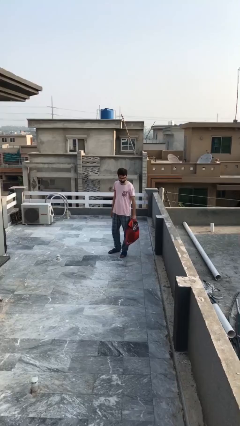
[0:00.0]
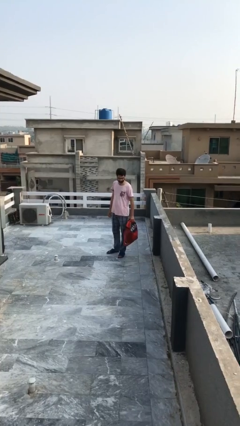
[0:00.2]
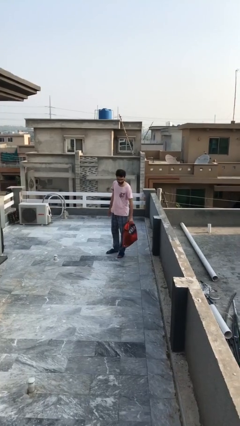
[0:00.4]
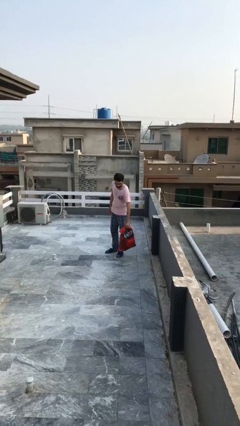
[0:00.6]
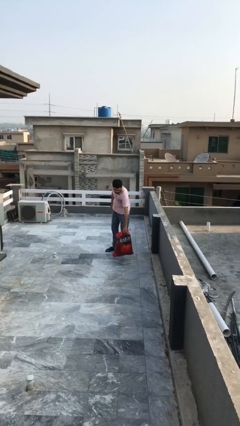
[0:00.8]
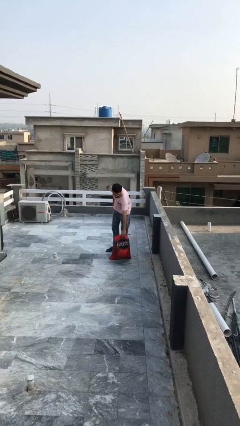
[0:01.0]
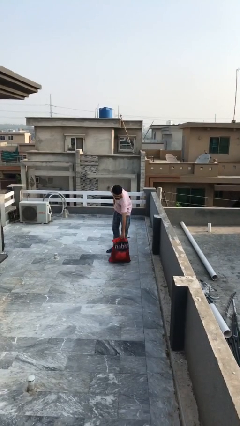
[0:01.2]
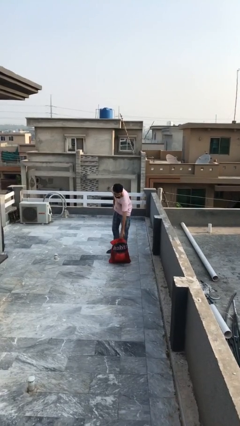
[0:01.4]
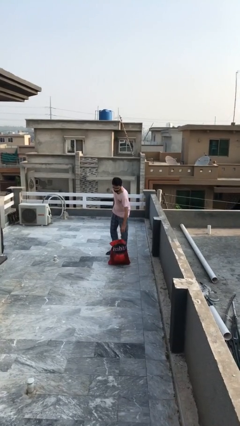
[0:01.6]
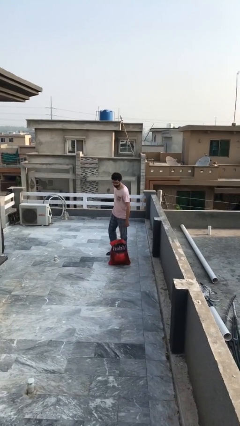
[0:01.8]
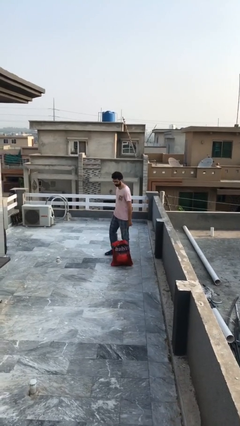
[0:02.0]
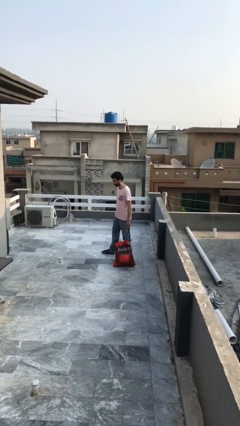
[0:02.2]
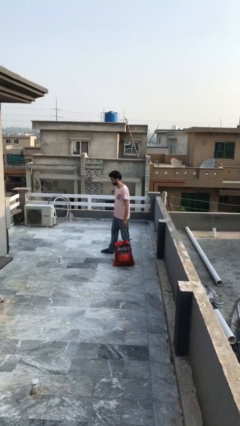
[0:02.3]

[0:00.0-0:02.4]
person puts down object on floor

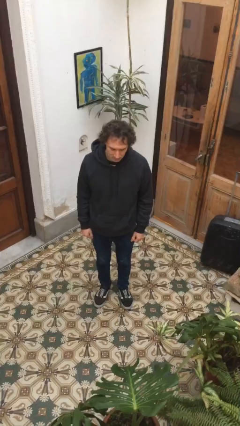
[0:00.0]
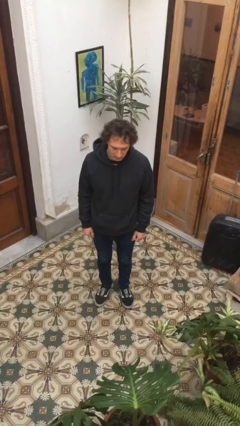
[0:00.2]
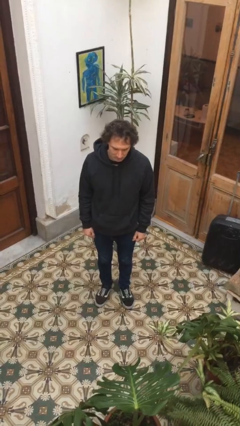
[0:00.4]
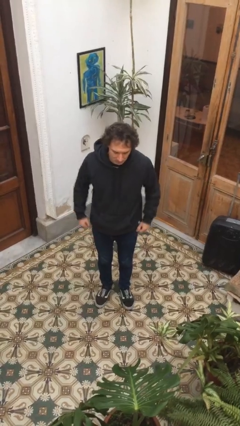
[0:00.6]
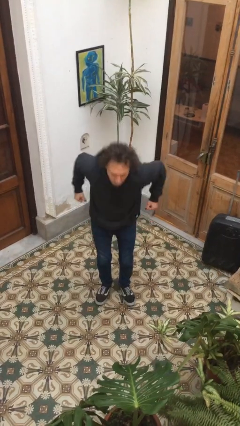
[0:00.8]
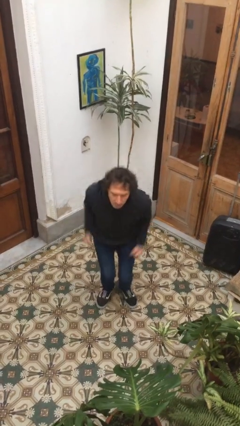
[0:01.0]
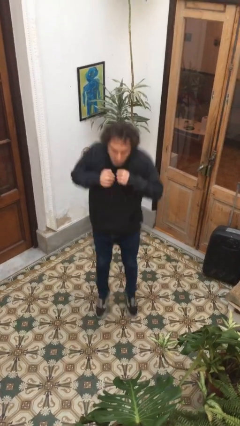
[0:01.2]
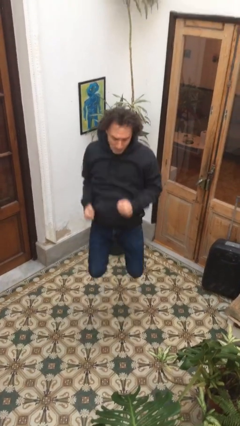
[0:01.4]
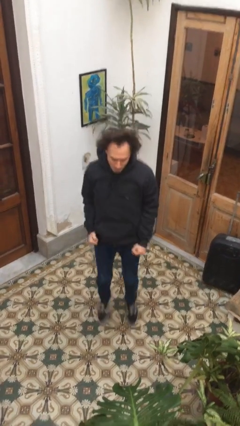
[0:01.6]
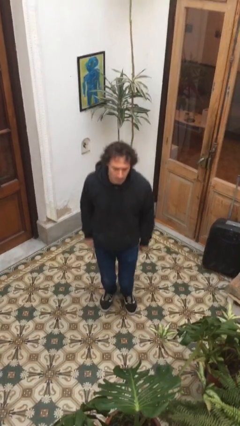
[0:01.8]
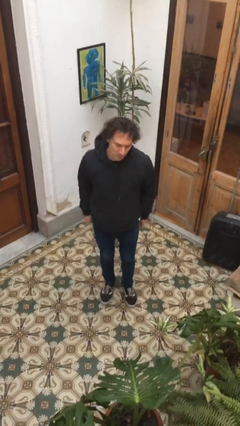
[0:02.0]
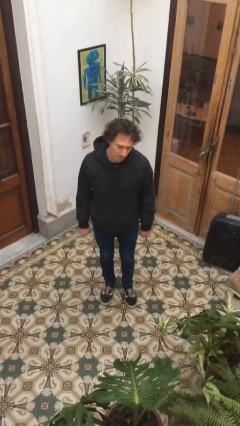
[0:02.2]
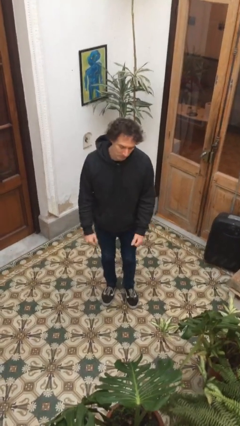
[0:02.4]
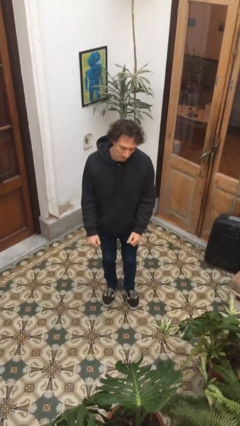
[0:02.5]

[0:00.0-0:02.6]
person jumps

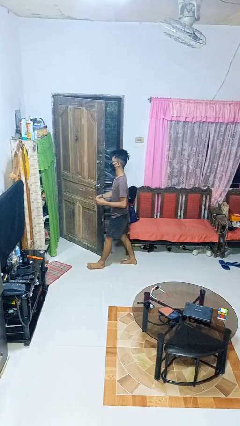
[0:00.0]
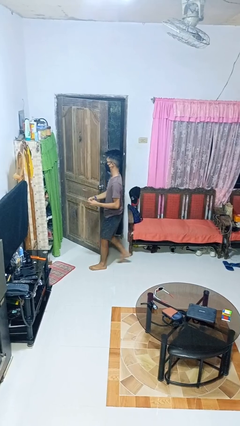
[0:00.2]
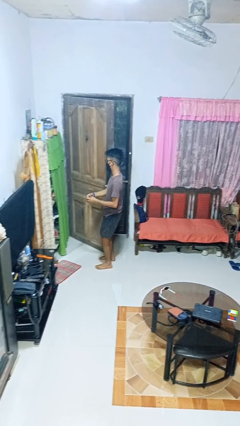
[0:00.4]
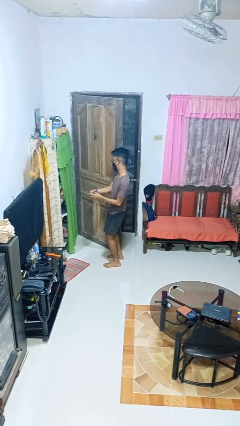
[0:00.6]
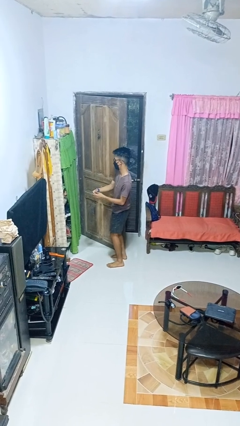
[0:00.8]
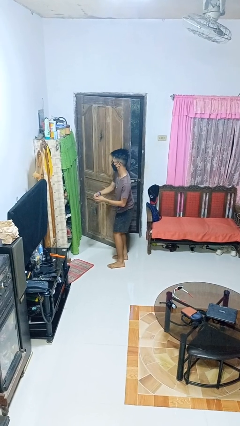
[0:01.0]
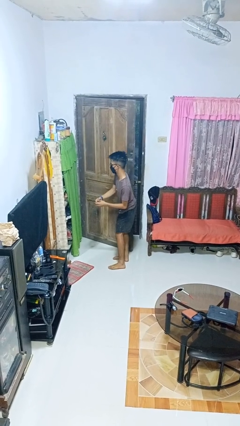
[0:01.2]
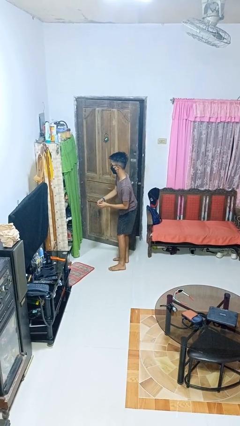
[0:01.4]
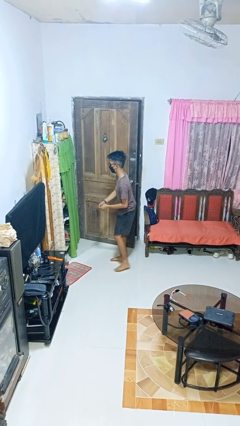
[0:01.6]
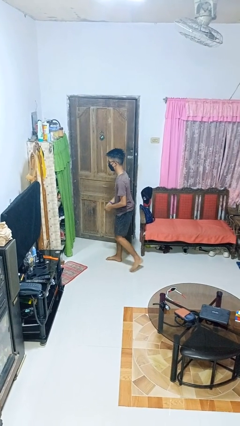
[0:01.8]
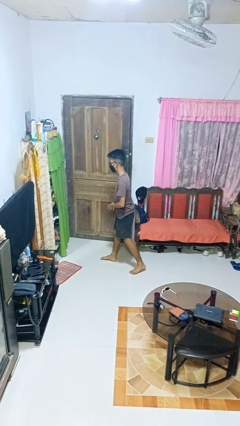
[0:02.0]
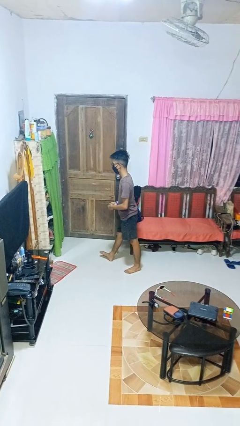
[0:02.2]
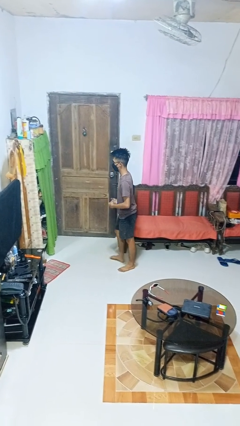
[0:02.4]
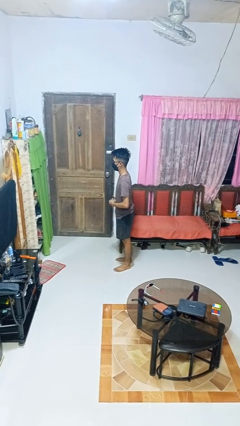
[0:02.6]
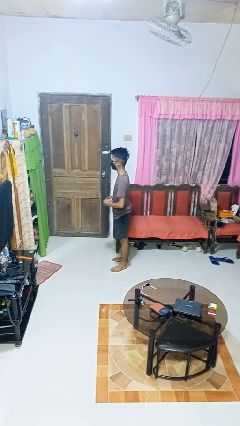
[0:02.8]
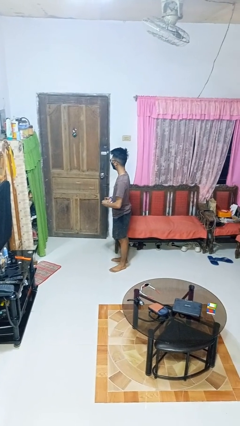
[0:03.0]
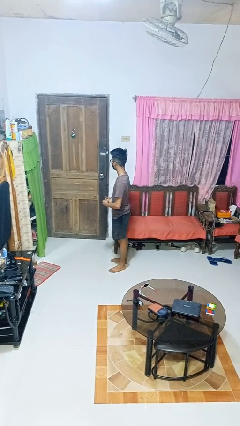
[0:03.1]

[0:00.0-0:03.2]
person closes door with hip

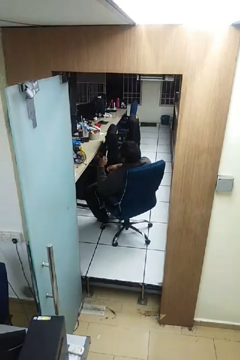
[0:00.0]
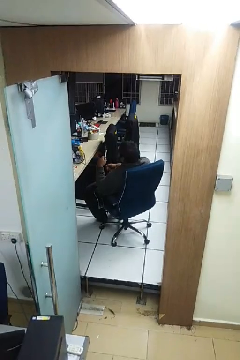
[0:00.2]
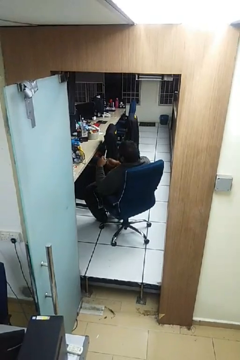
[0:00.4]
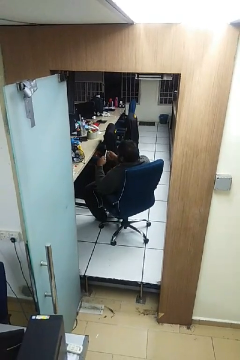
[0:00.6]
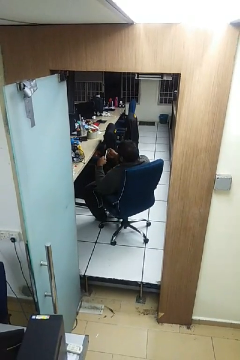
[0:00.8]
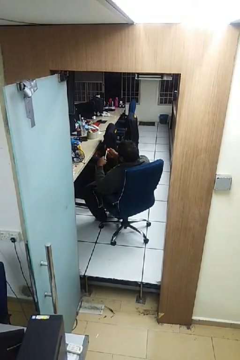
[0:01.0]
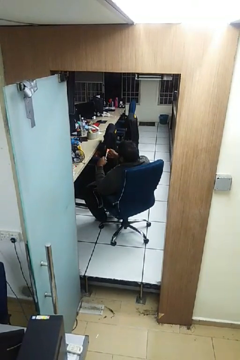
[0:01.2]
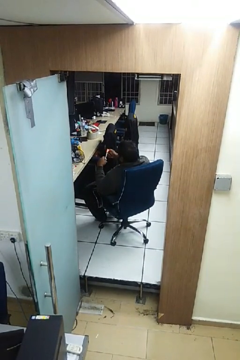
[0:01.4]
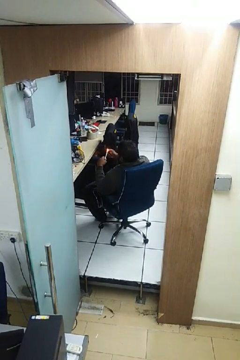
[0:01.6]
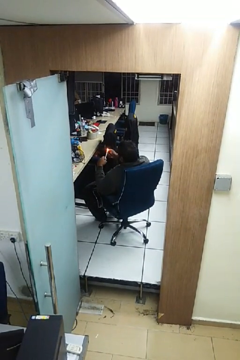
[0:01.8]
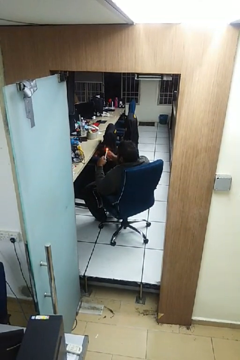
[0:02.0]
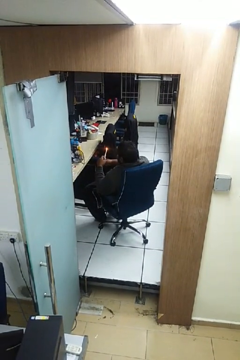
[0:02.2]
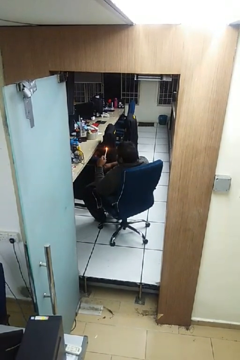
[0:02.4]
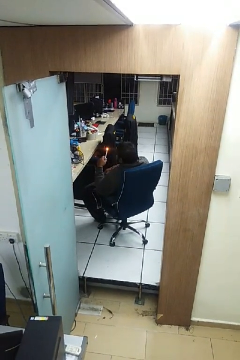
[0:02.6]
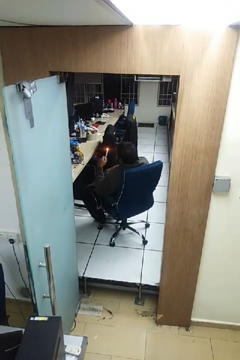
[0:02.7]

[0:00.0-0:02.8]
person lights candle

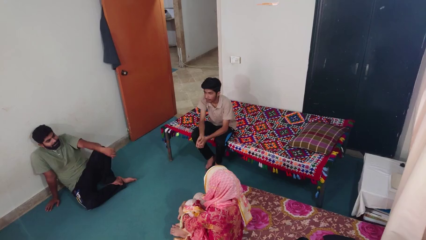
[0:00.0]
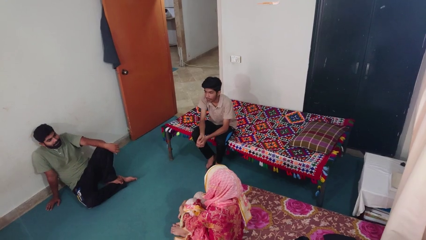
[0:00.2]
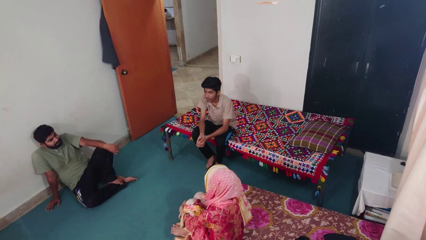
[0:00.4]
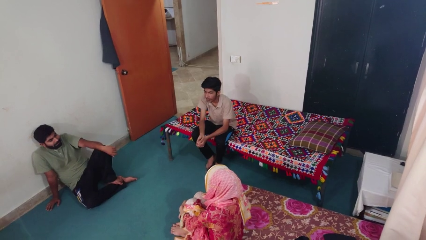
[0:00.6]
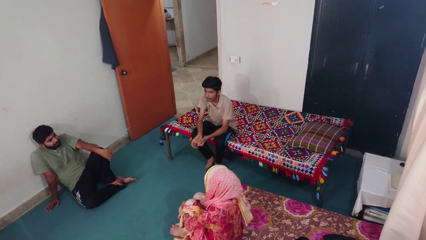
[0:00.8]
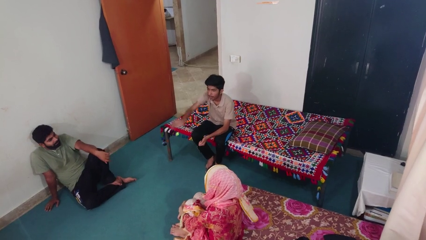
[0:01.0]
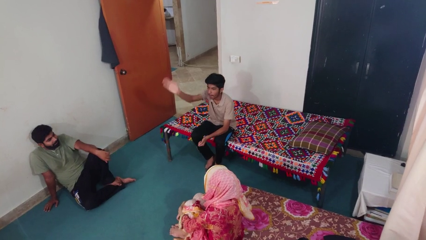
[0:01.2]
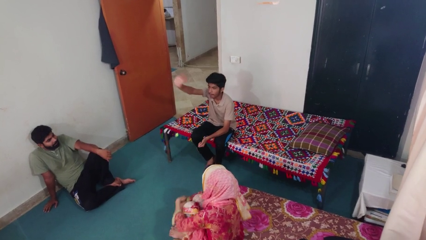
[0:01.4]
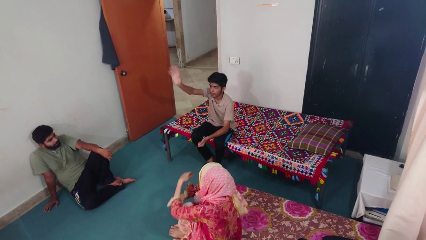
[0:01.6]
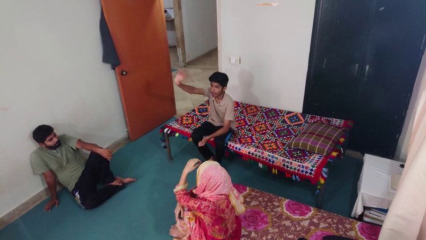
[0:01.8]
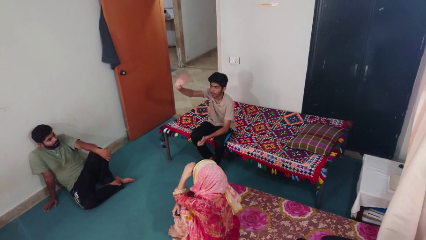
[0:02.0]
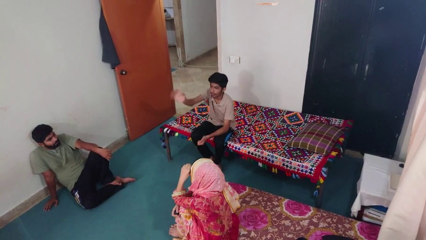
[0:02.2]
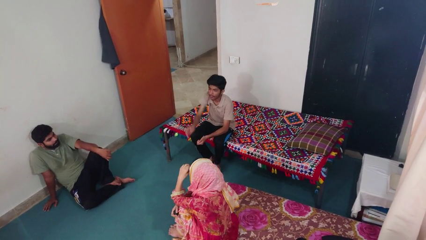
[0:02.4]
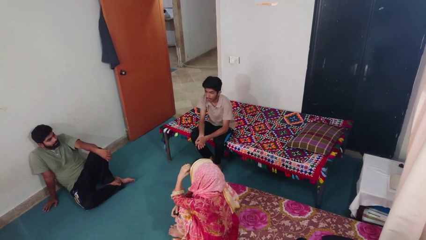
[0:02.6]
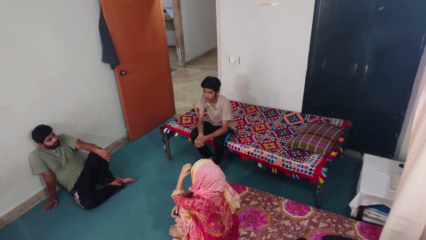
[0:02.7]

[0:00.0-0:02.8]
person waves at person

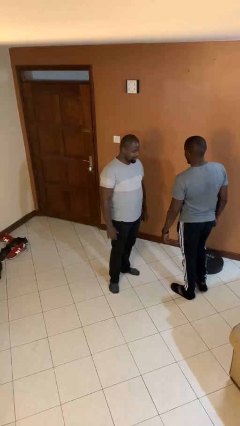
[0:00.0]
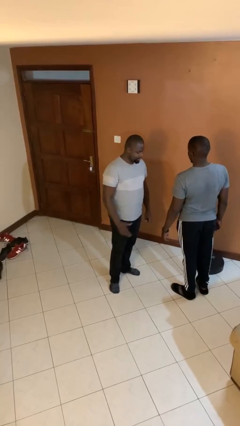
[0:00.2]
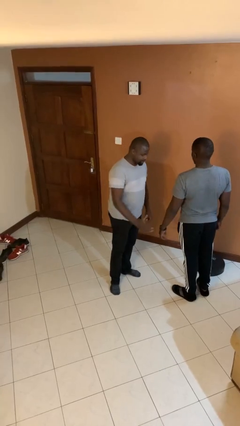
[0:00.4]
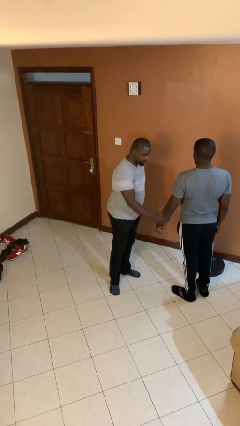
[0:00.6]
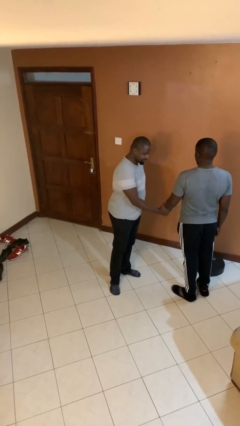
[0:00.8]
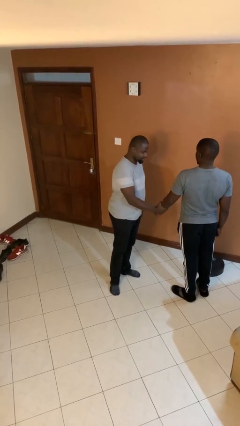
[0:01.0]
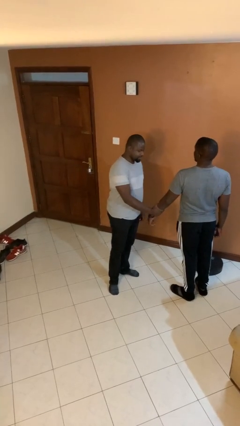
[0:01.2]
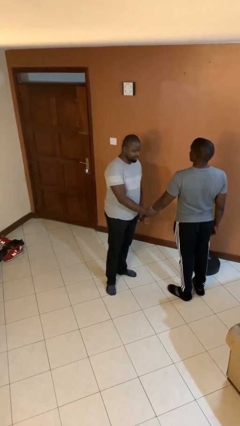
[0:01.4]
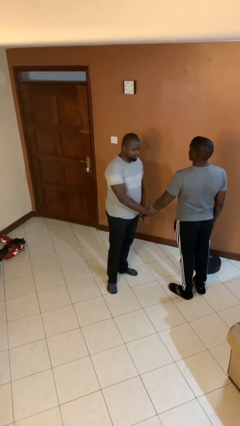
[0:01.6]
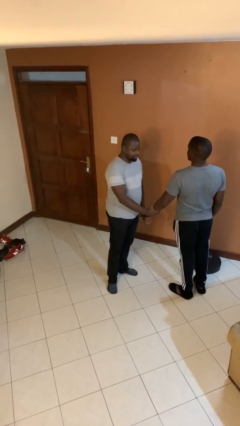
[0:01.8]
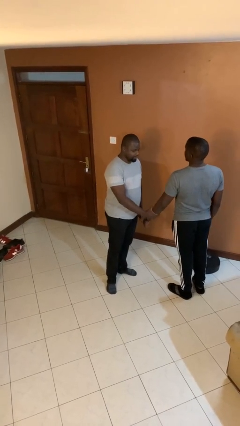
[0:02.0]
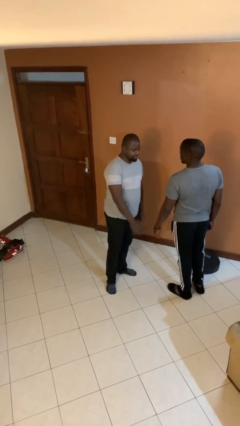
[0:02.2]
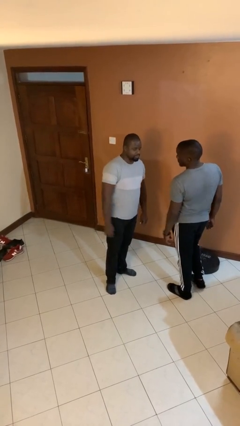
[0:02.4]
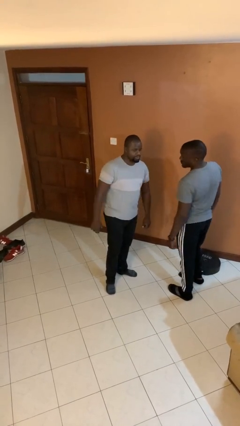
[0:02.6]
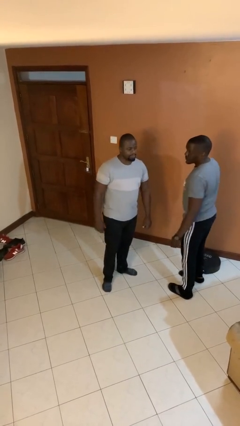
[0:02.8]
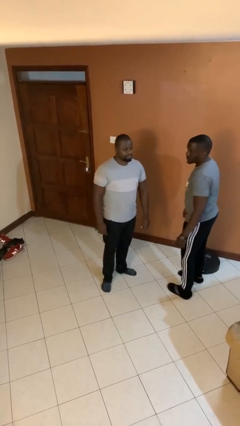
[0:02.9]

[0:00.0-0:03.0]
person grabs person by forearm

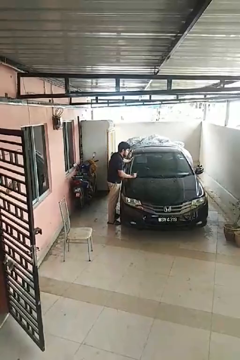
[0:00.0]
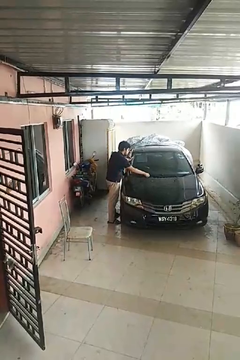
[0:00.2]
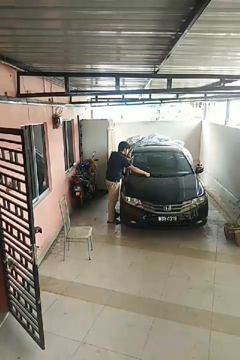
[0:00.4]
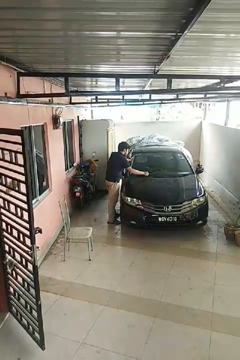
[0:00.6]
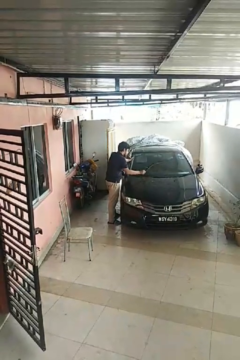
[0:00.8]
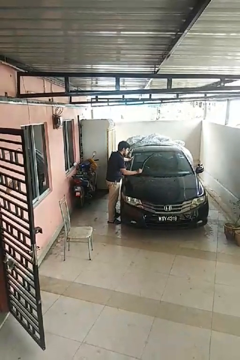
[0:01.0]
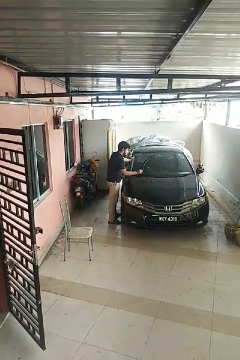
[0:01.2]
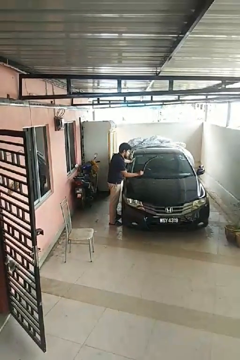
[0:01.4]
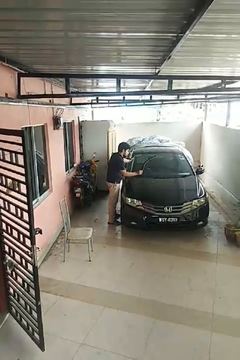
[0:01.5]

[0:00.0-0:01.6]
person flips up car wipers
